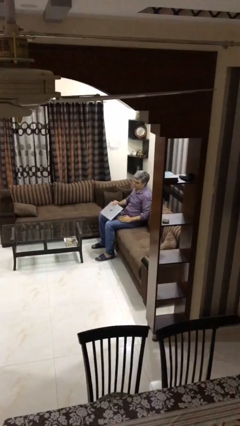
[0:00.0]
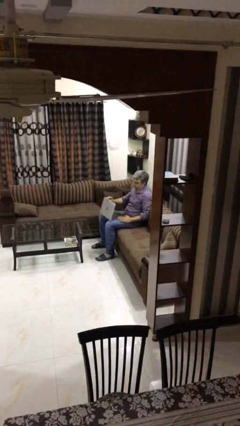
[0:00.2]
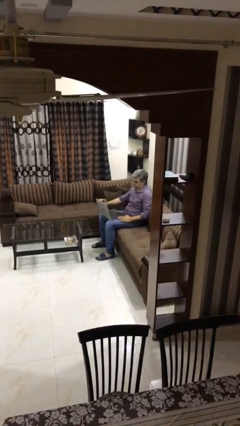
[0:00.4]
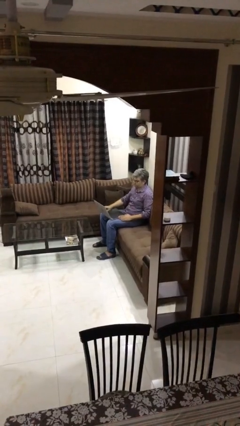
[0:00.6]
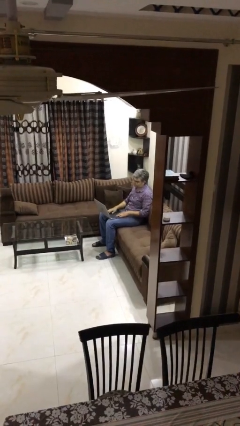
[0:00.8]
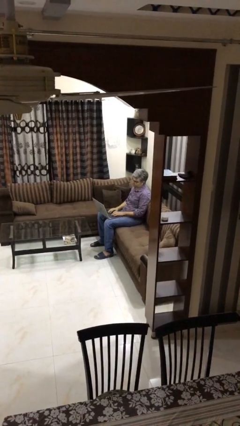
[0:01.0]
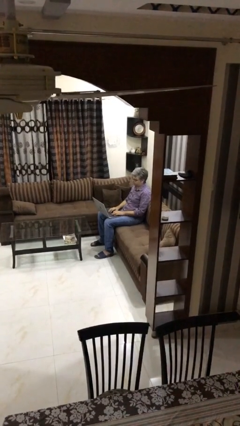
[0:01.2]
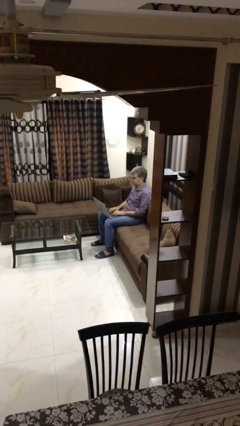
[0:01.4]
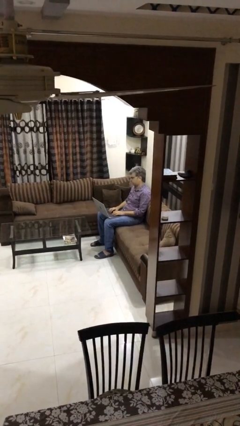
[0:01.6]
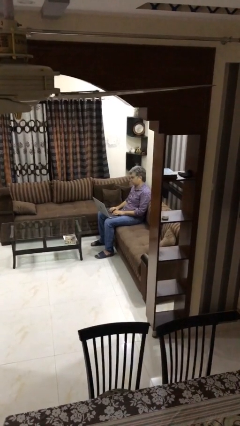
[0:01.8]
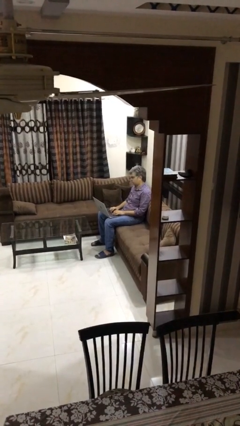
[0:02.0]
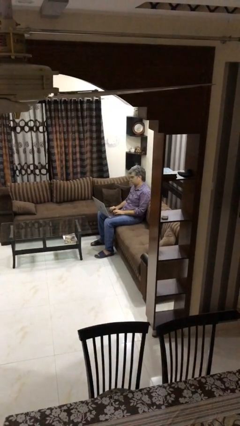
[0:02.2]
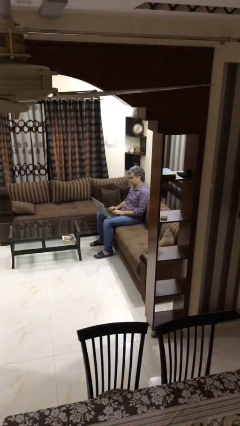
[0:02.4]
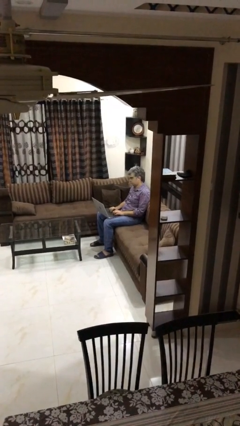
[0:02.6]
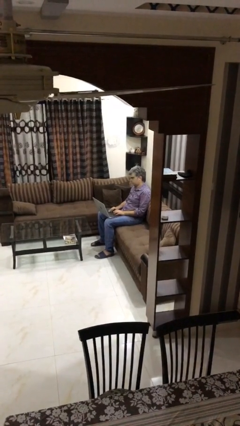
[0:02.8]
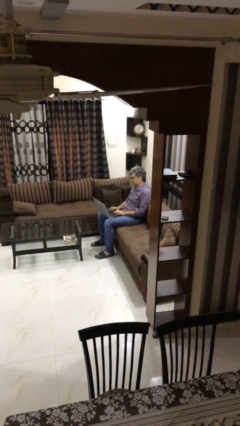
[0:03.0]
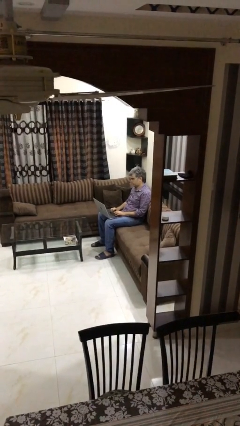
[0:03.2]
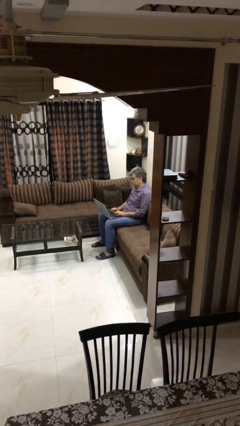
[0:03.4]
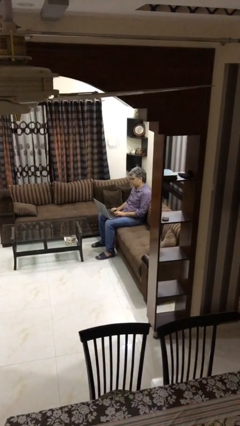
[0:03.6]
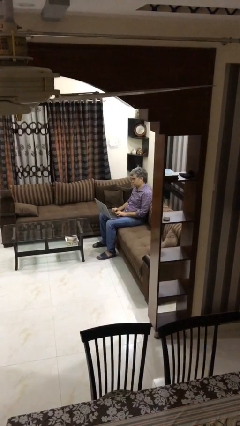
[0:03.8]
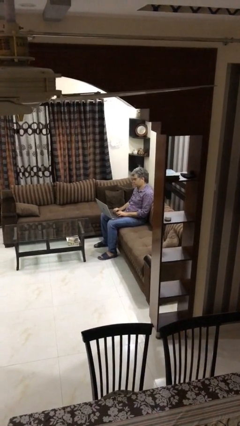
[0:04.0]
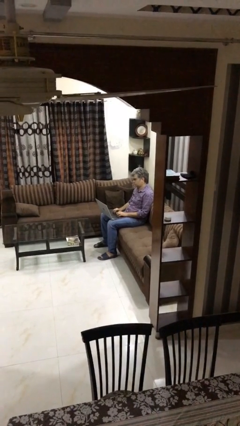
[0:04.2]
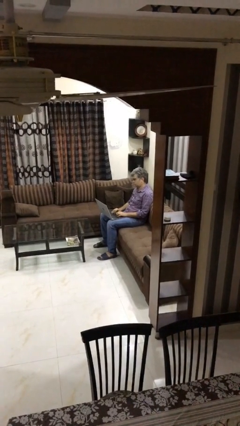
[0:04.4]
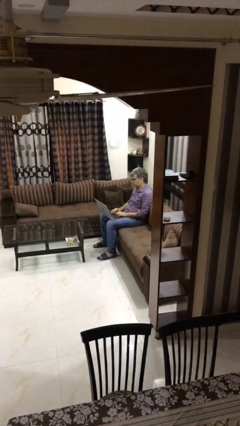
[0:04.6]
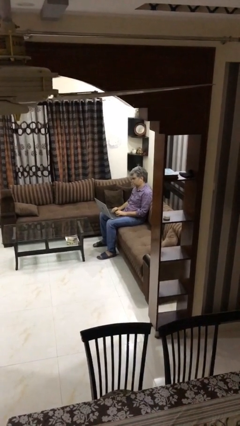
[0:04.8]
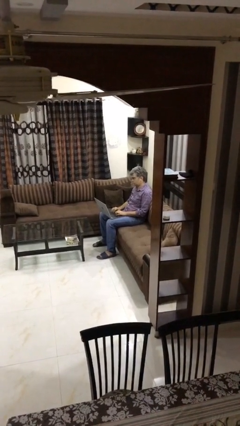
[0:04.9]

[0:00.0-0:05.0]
person interacts with laptop

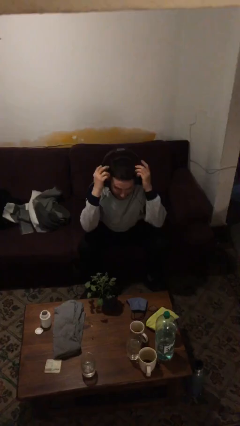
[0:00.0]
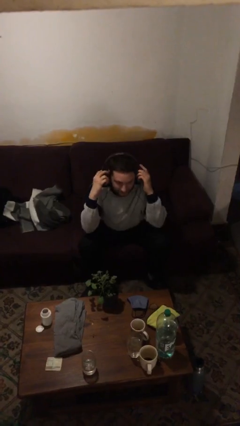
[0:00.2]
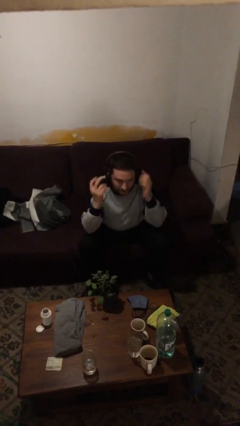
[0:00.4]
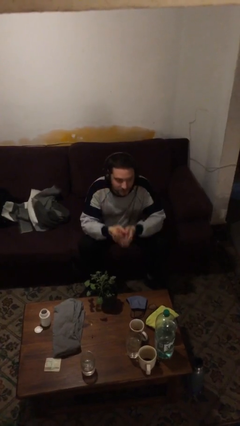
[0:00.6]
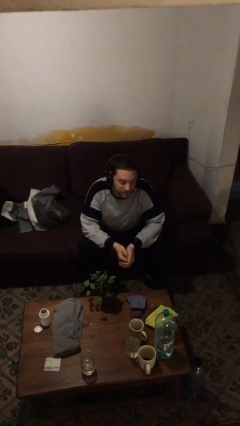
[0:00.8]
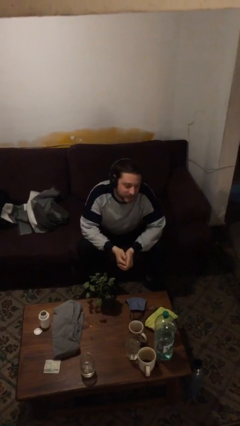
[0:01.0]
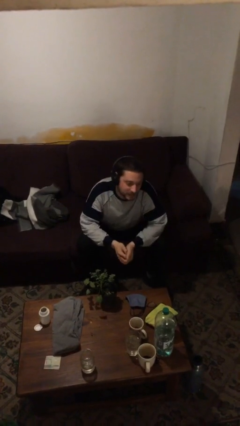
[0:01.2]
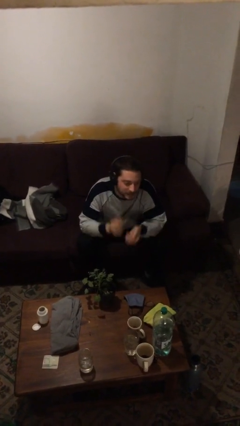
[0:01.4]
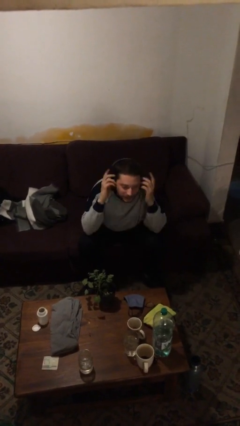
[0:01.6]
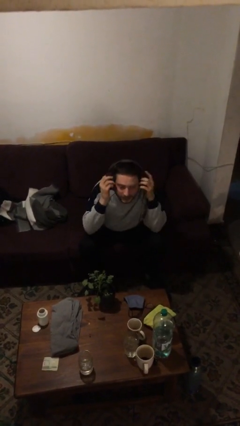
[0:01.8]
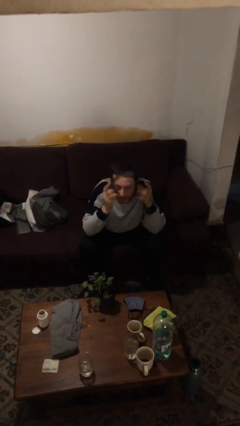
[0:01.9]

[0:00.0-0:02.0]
person puts on headphones

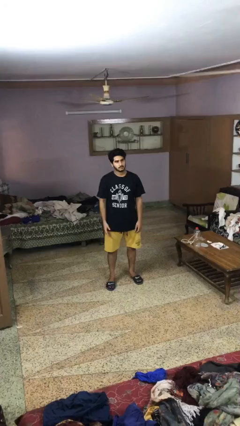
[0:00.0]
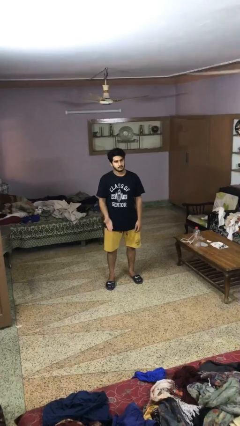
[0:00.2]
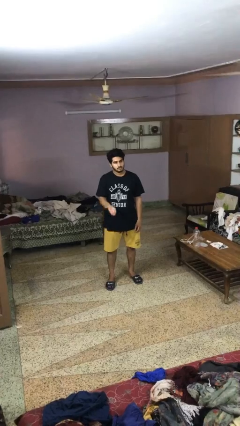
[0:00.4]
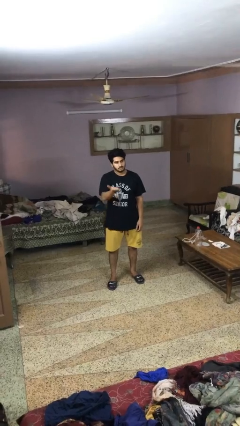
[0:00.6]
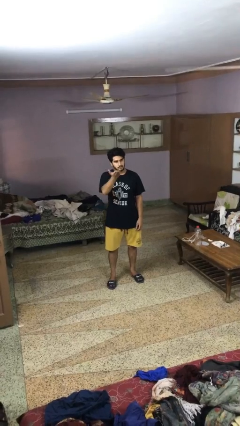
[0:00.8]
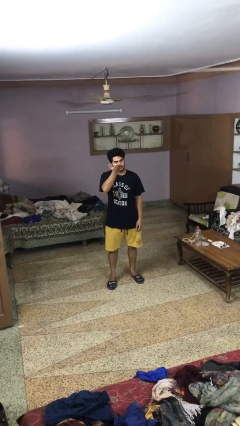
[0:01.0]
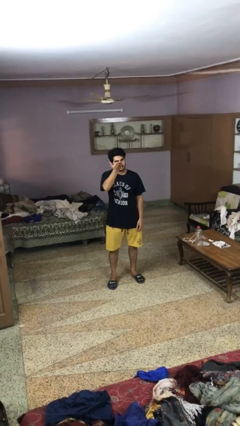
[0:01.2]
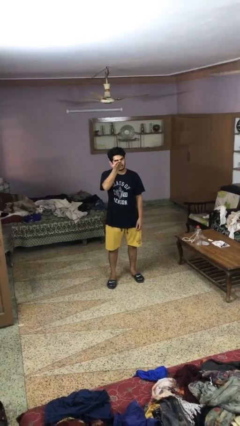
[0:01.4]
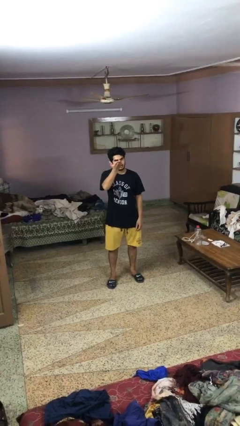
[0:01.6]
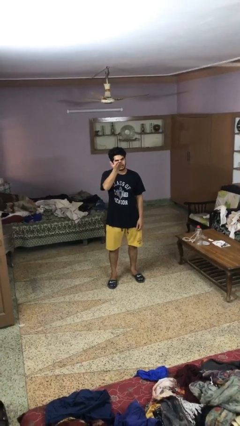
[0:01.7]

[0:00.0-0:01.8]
person gestures swipe up

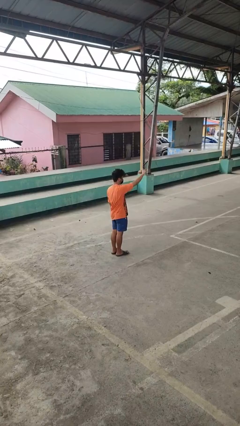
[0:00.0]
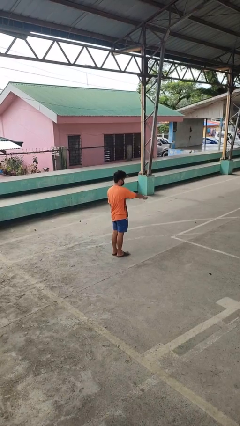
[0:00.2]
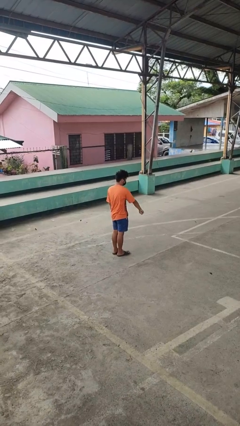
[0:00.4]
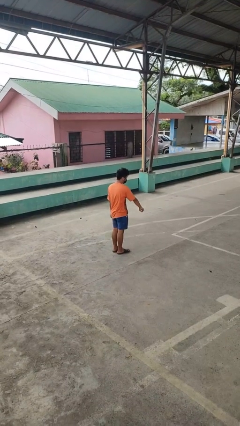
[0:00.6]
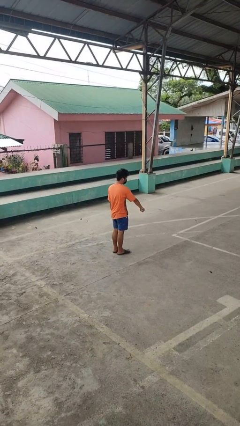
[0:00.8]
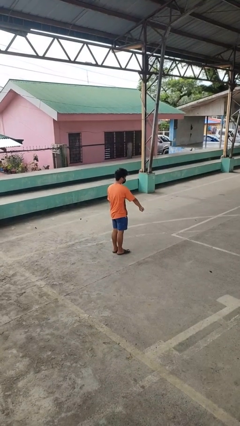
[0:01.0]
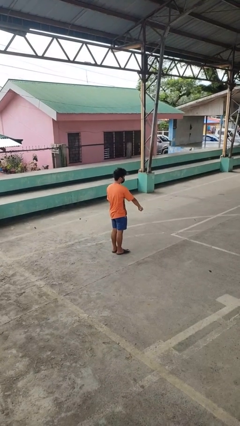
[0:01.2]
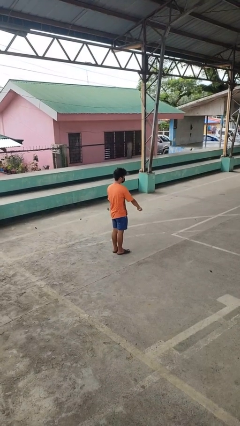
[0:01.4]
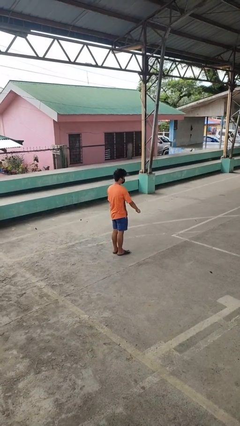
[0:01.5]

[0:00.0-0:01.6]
person gestures swipe down

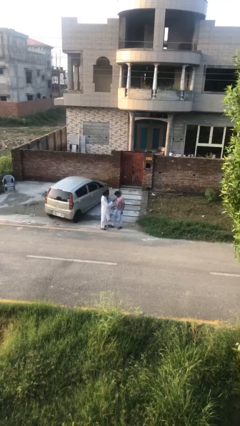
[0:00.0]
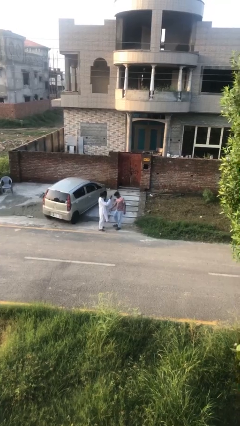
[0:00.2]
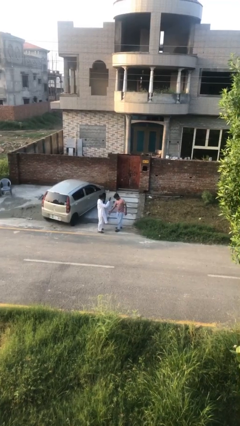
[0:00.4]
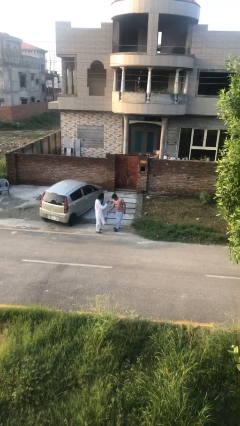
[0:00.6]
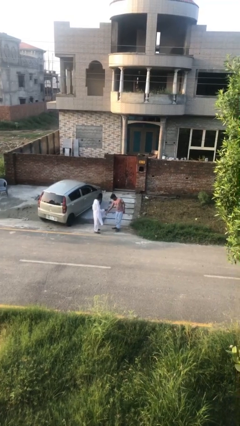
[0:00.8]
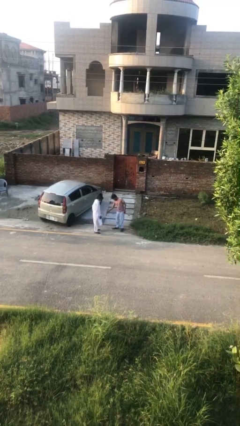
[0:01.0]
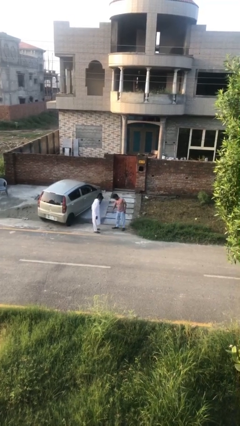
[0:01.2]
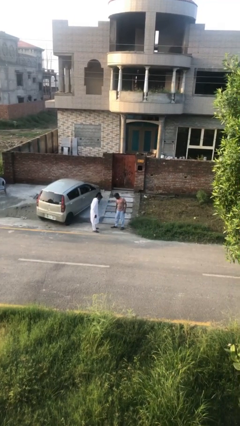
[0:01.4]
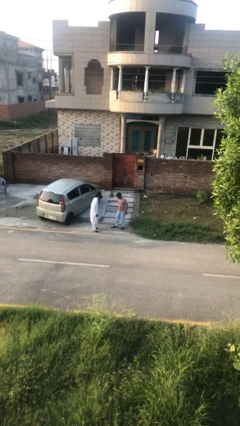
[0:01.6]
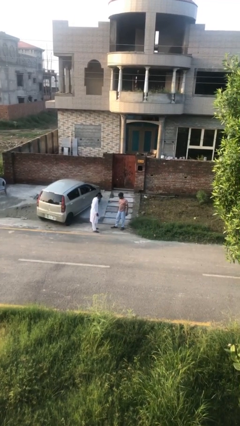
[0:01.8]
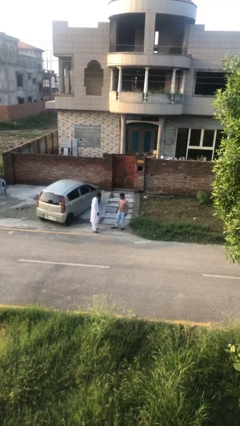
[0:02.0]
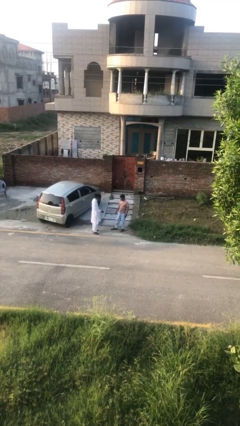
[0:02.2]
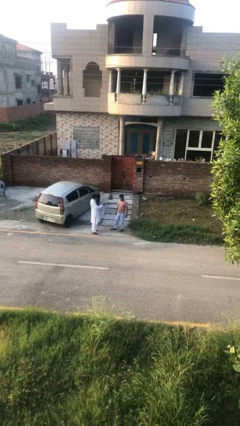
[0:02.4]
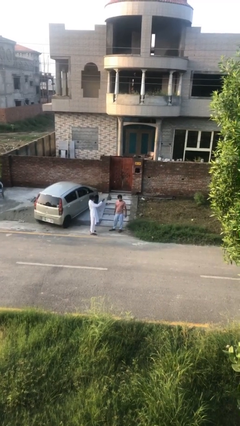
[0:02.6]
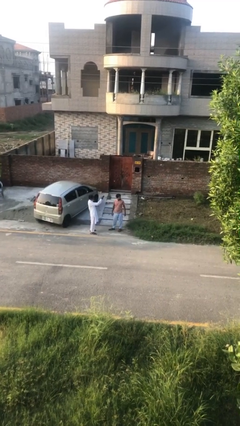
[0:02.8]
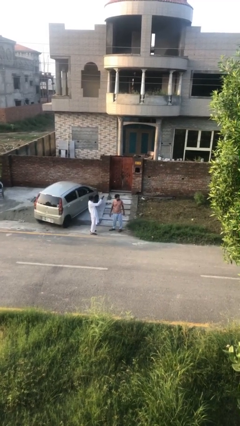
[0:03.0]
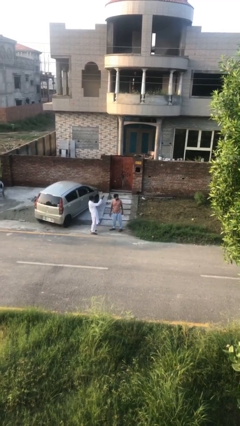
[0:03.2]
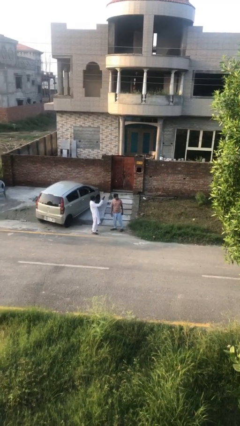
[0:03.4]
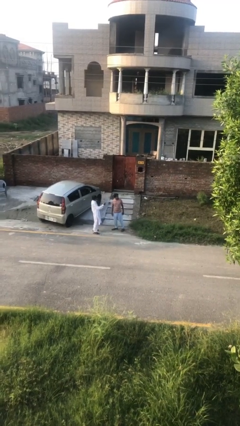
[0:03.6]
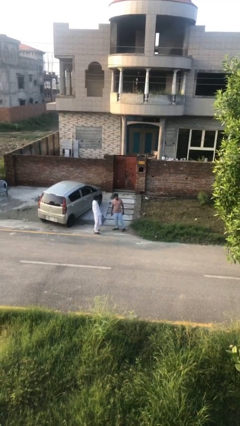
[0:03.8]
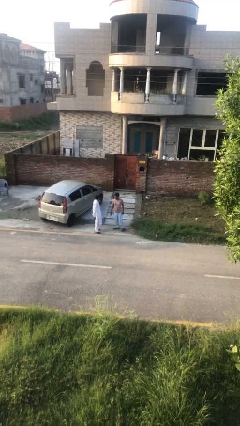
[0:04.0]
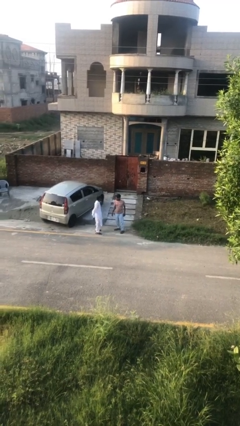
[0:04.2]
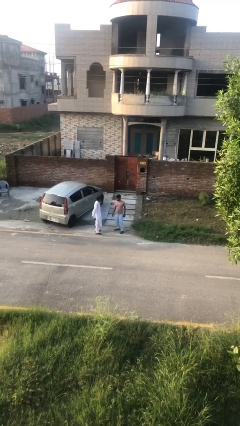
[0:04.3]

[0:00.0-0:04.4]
person talks to person

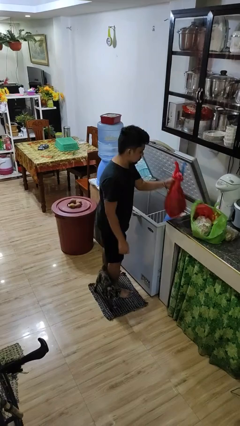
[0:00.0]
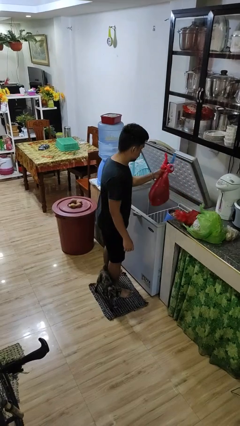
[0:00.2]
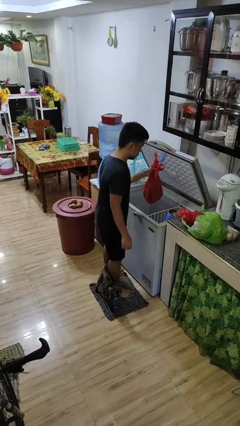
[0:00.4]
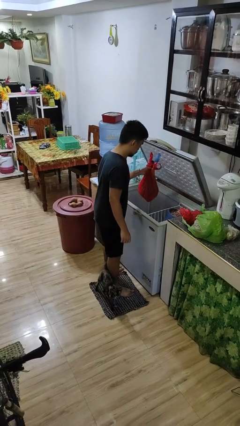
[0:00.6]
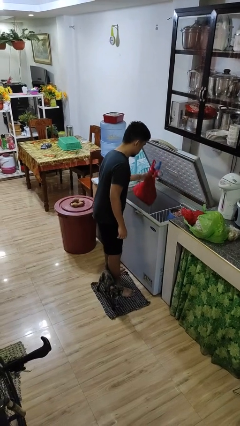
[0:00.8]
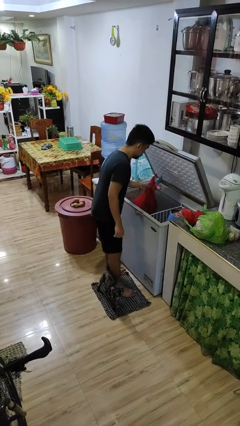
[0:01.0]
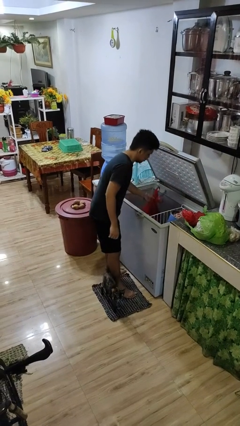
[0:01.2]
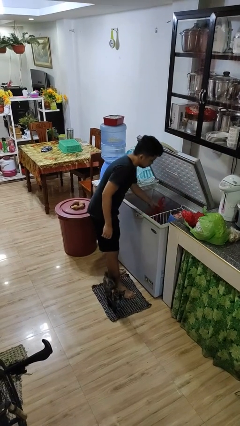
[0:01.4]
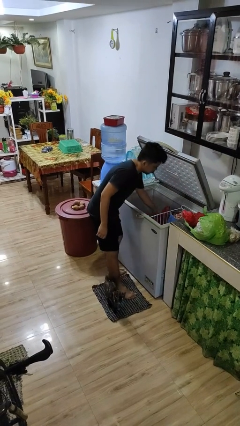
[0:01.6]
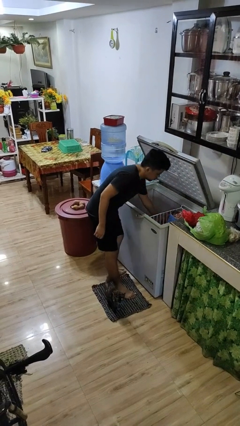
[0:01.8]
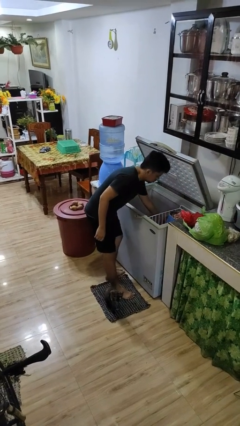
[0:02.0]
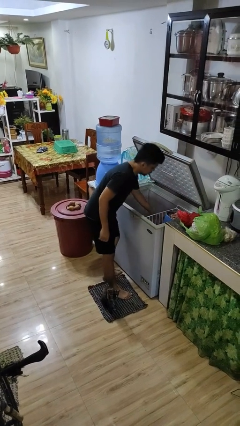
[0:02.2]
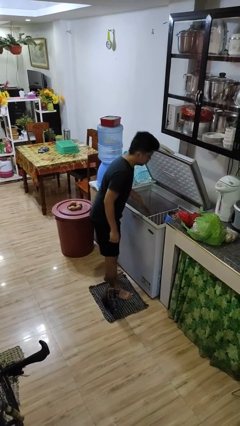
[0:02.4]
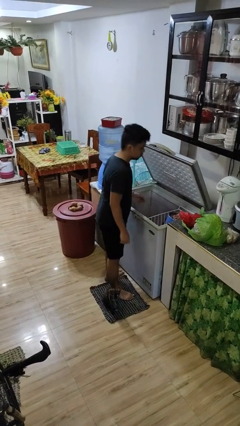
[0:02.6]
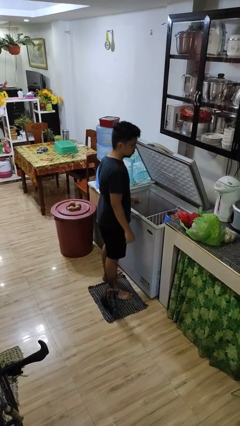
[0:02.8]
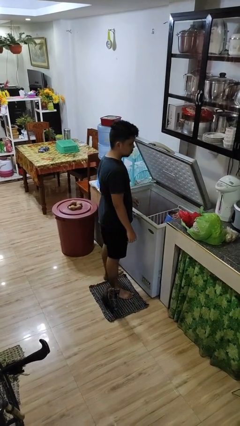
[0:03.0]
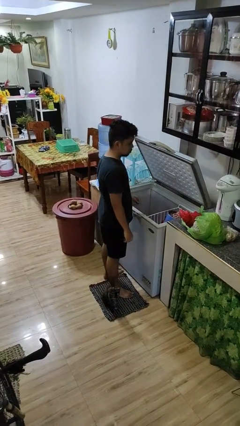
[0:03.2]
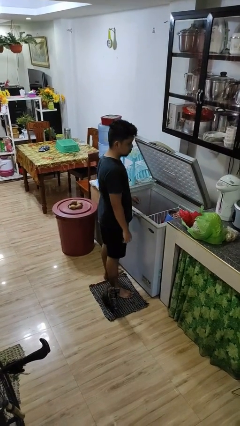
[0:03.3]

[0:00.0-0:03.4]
person loads groceries into refrigerator
